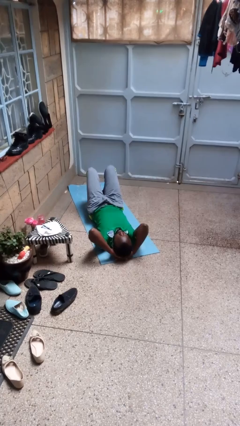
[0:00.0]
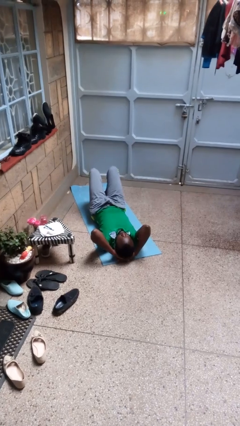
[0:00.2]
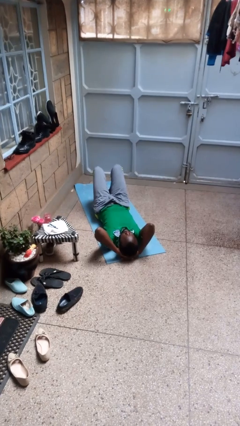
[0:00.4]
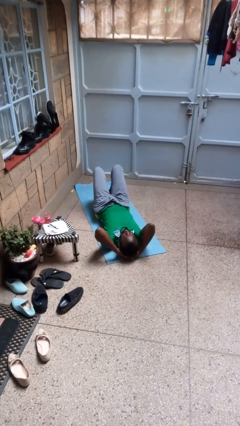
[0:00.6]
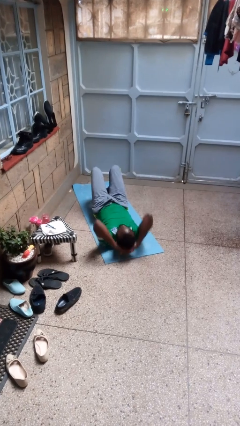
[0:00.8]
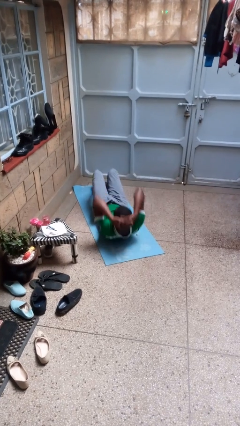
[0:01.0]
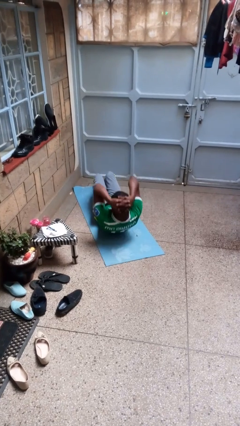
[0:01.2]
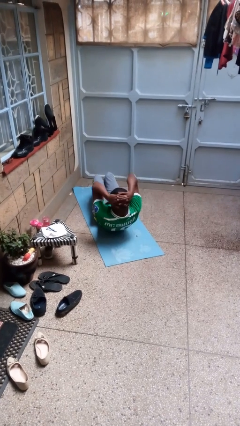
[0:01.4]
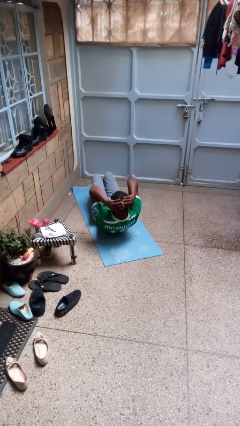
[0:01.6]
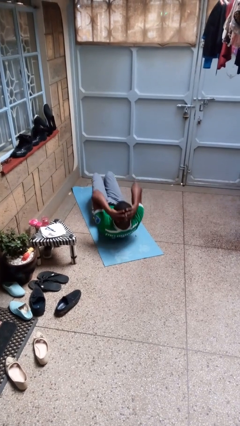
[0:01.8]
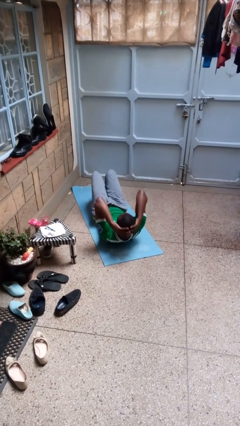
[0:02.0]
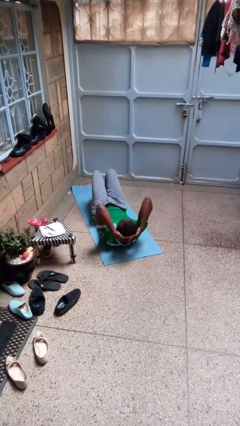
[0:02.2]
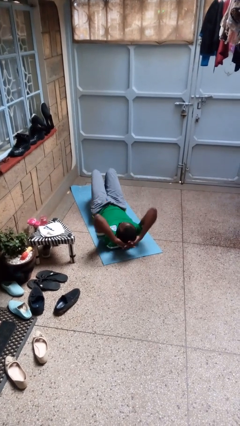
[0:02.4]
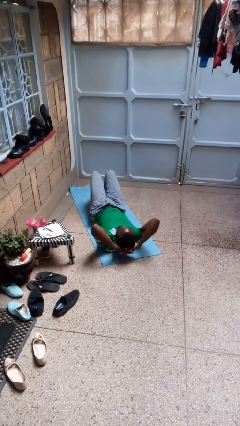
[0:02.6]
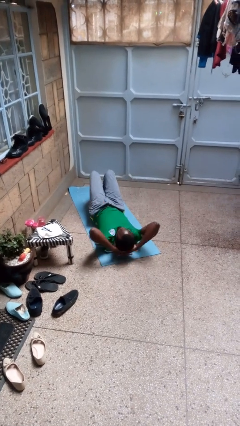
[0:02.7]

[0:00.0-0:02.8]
person exercises with situp

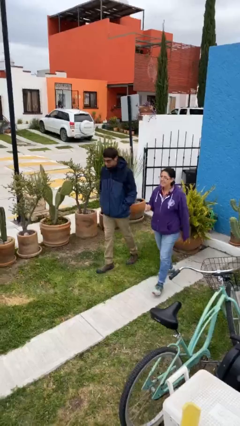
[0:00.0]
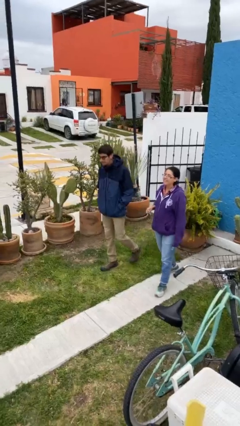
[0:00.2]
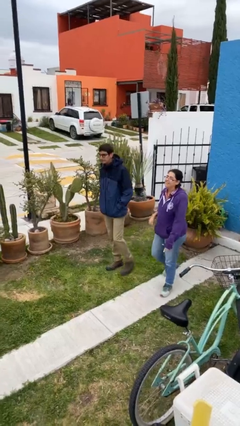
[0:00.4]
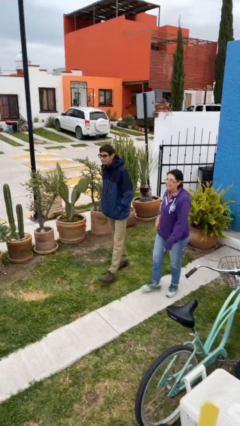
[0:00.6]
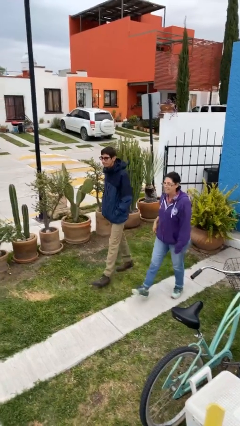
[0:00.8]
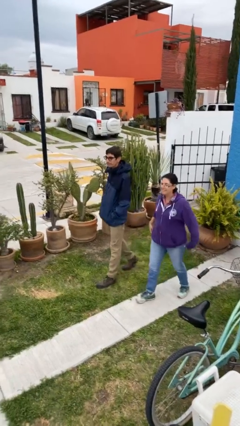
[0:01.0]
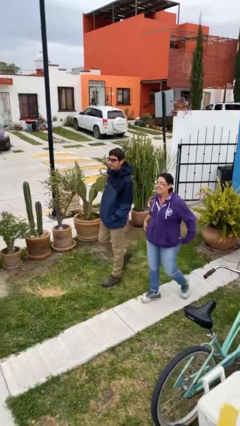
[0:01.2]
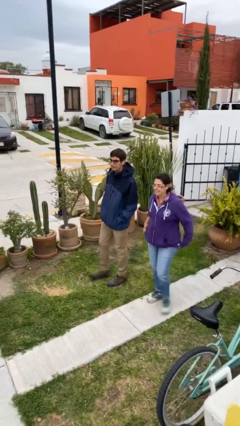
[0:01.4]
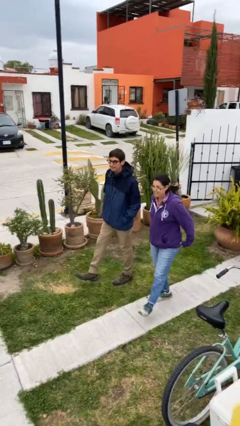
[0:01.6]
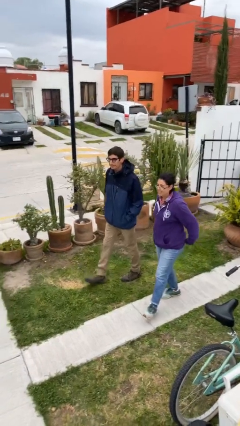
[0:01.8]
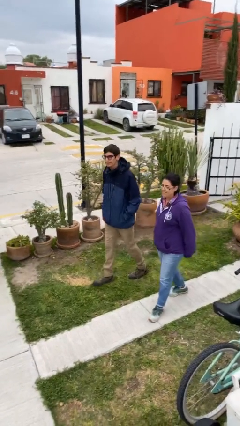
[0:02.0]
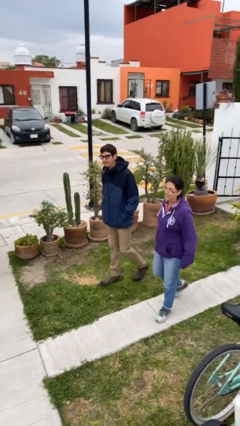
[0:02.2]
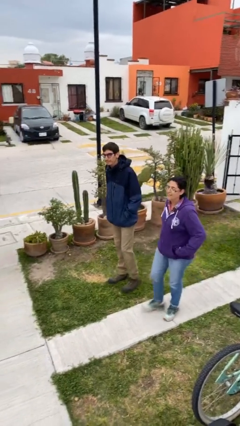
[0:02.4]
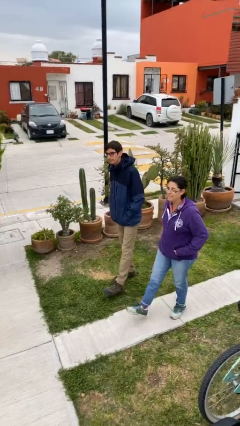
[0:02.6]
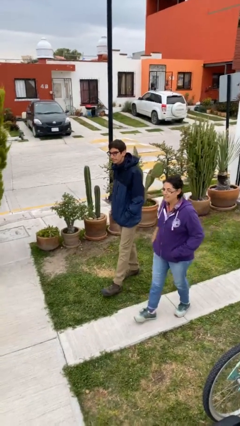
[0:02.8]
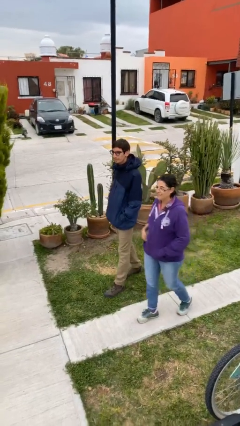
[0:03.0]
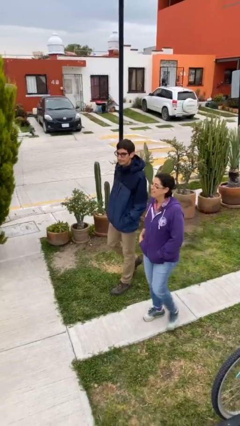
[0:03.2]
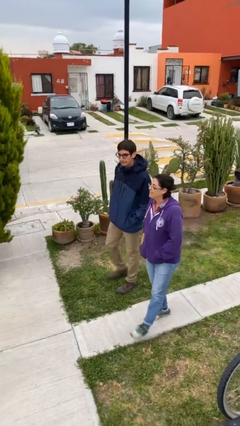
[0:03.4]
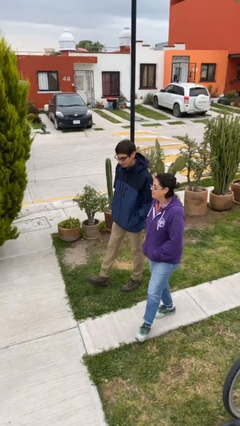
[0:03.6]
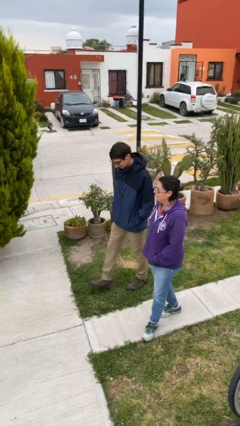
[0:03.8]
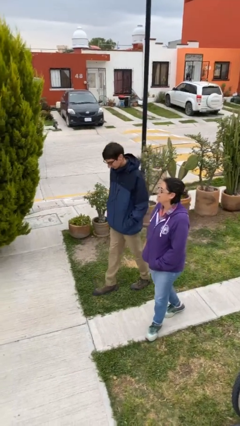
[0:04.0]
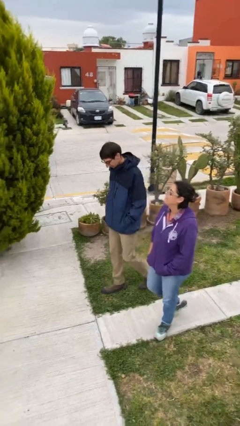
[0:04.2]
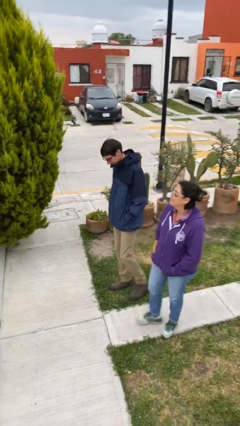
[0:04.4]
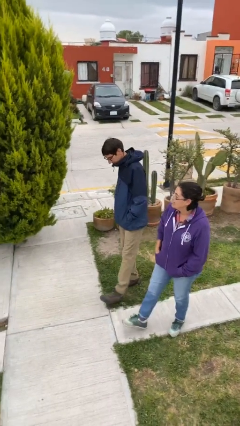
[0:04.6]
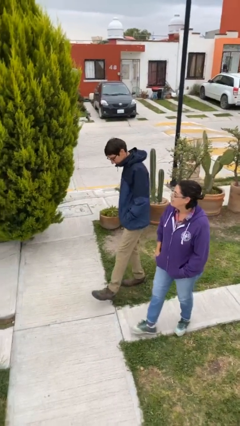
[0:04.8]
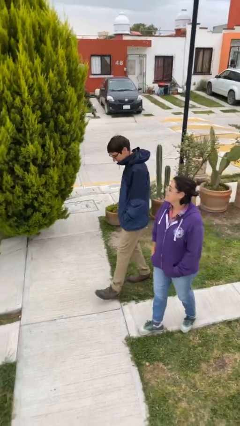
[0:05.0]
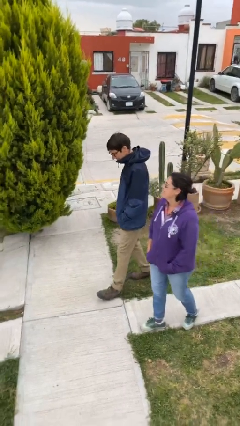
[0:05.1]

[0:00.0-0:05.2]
person talks to person

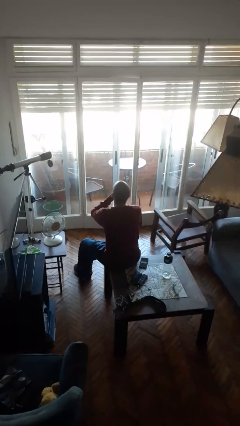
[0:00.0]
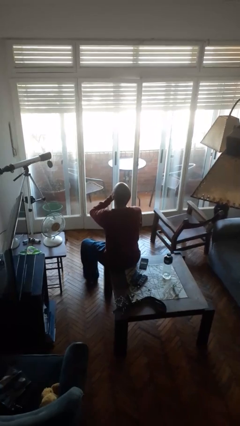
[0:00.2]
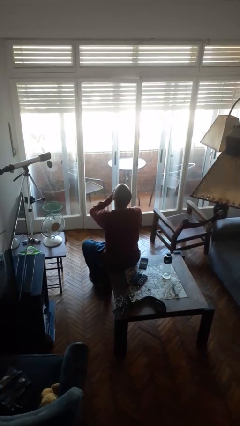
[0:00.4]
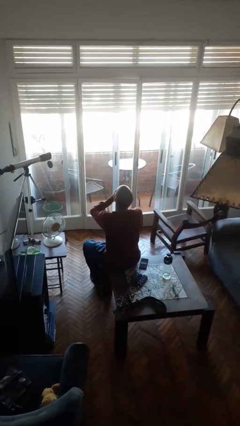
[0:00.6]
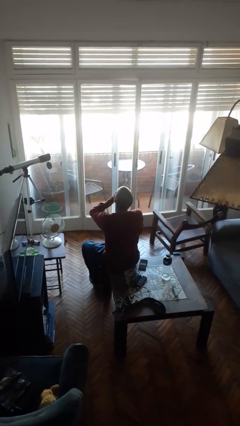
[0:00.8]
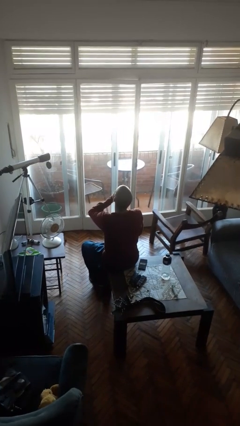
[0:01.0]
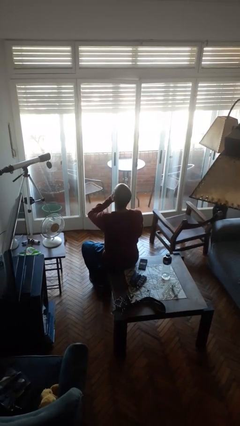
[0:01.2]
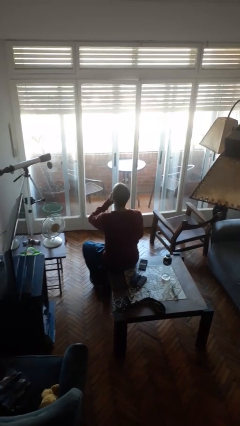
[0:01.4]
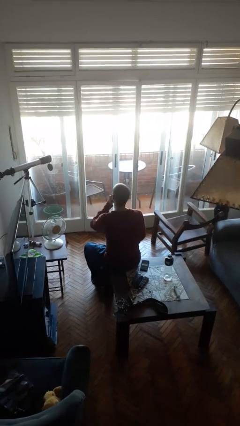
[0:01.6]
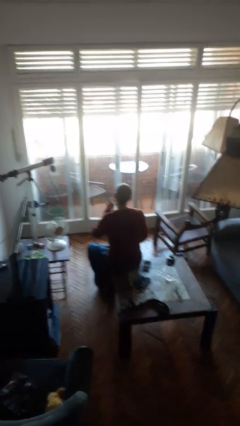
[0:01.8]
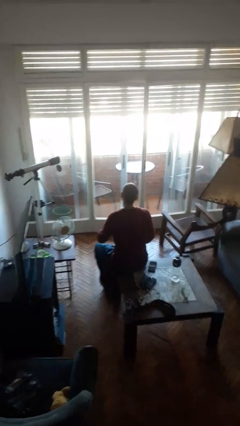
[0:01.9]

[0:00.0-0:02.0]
person yawns

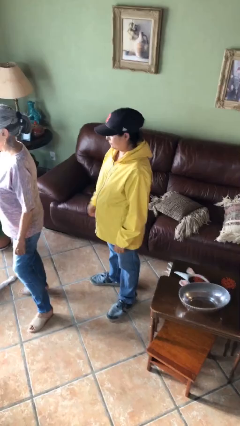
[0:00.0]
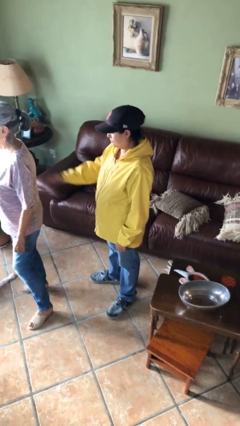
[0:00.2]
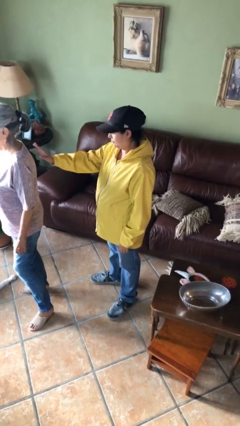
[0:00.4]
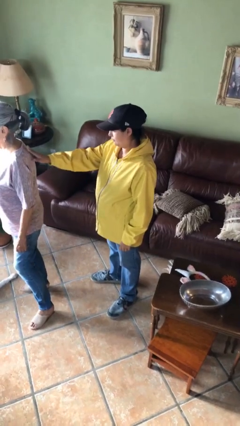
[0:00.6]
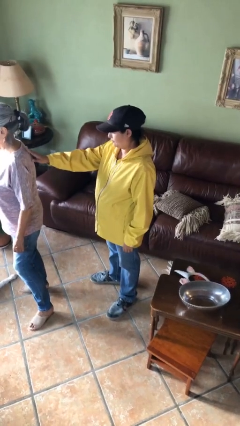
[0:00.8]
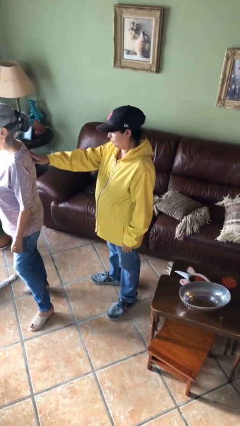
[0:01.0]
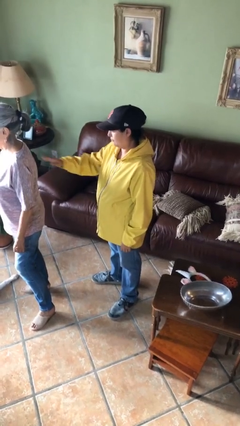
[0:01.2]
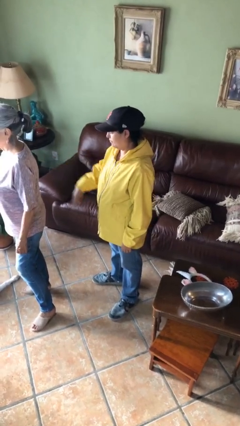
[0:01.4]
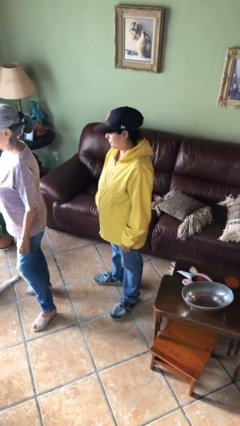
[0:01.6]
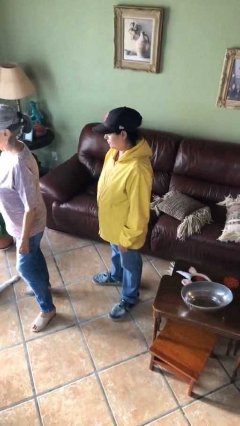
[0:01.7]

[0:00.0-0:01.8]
person touches back of person

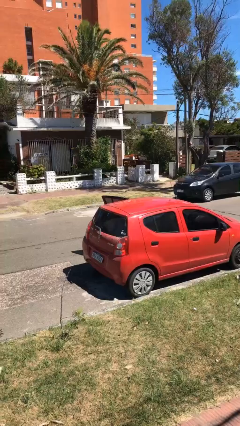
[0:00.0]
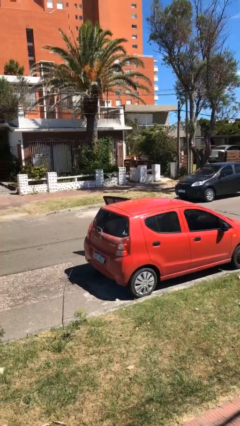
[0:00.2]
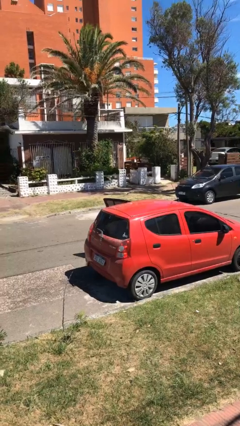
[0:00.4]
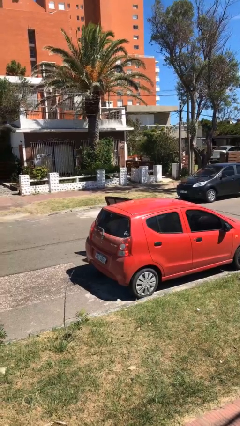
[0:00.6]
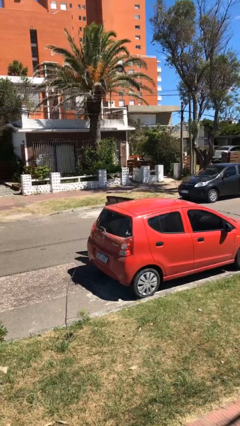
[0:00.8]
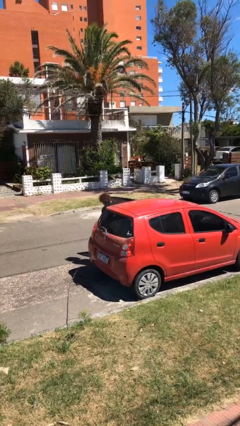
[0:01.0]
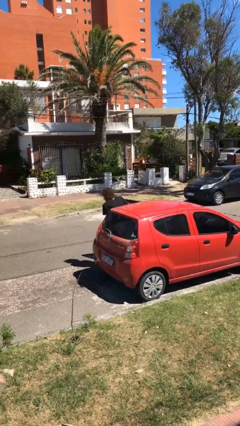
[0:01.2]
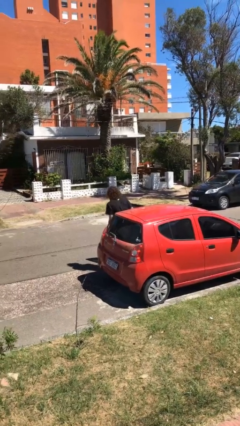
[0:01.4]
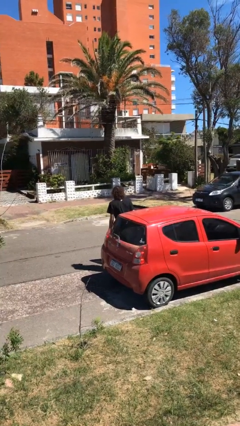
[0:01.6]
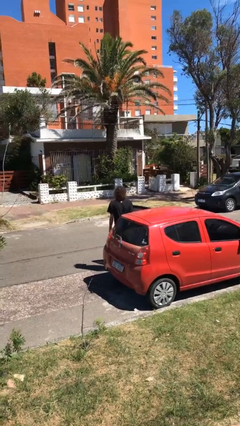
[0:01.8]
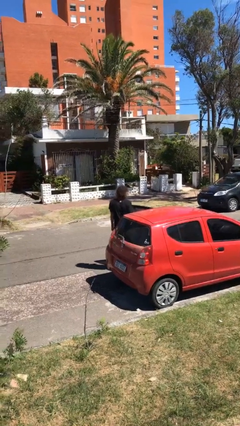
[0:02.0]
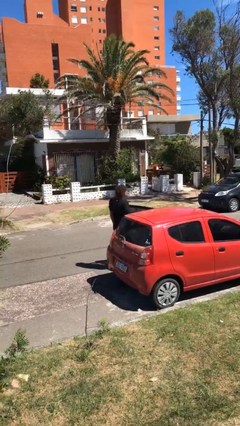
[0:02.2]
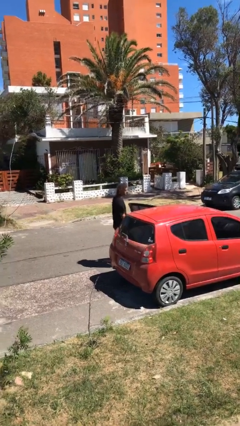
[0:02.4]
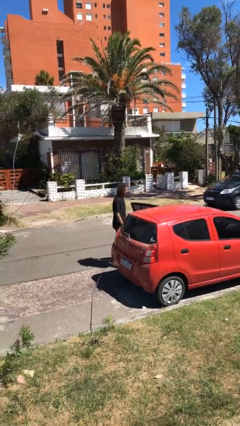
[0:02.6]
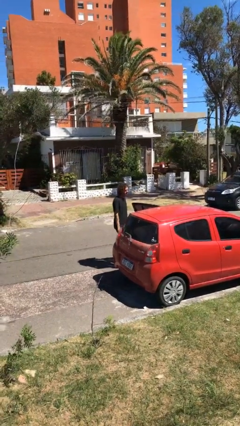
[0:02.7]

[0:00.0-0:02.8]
person exits car

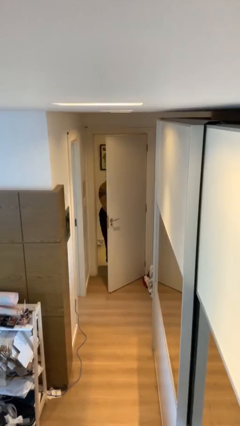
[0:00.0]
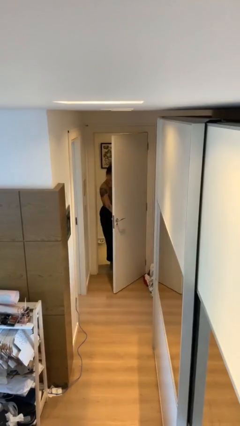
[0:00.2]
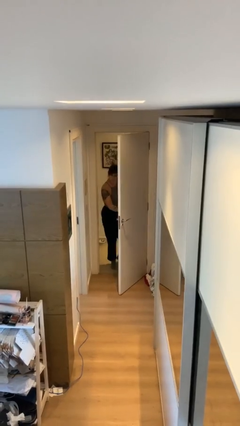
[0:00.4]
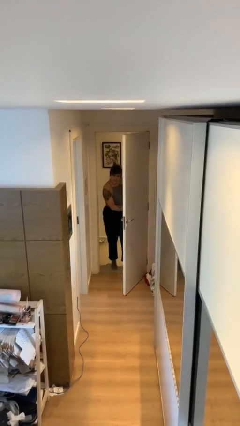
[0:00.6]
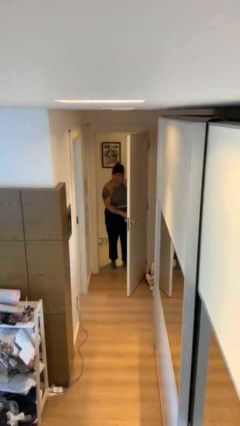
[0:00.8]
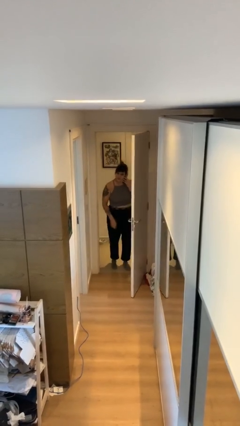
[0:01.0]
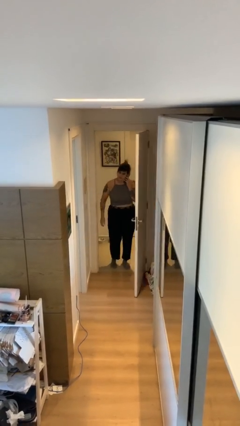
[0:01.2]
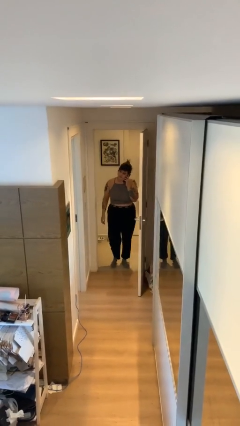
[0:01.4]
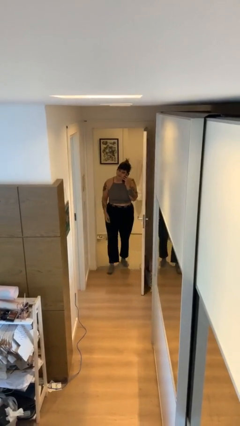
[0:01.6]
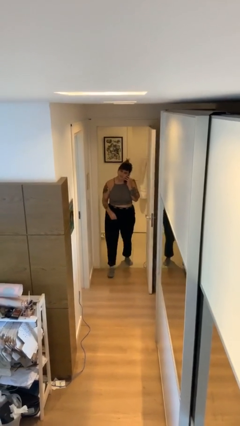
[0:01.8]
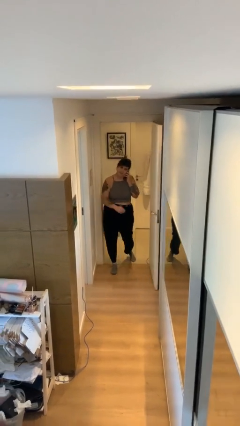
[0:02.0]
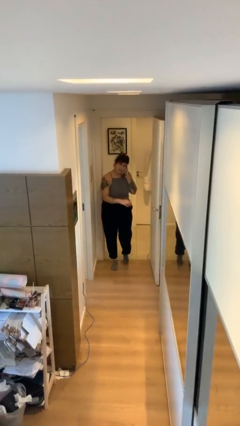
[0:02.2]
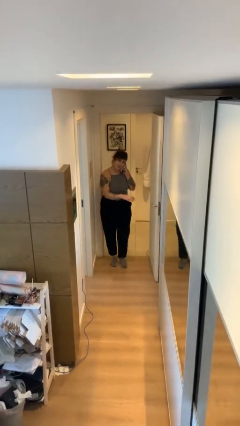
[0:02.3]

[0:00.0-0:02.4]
person opens facility door

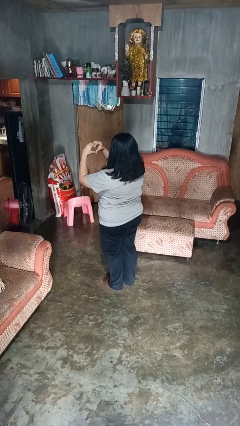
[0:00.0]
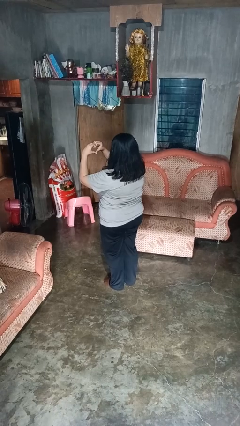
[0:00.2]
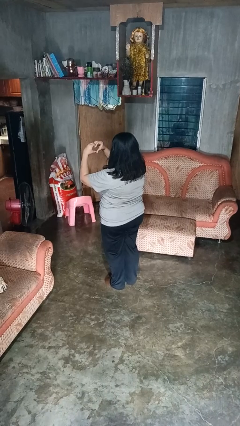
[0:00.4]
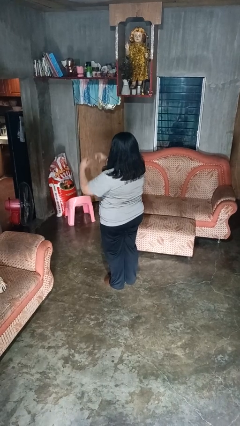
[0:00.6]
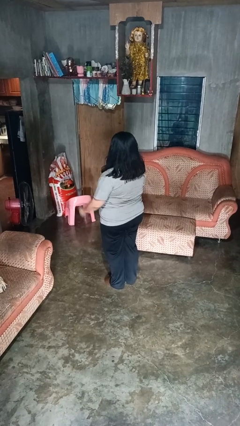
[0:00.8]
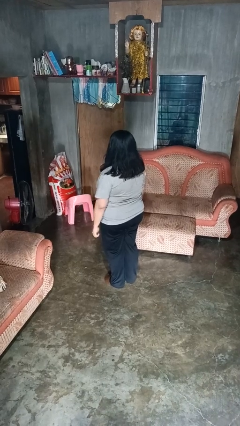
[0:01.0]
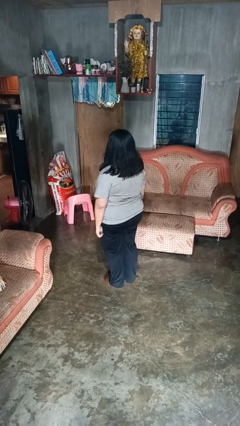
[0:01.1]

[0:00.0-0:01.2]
person gestures heart
